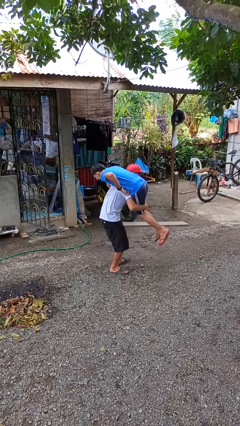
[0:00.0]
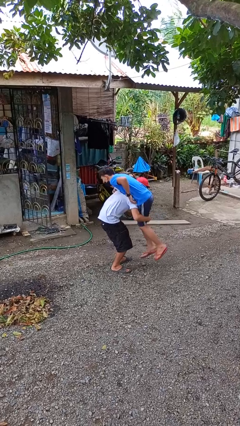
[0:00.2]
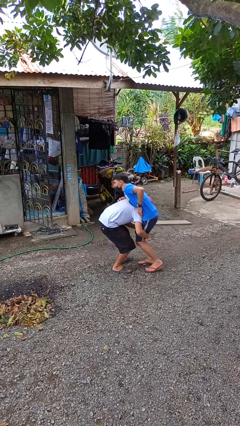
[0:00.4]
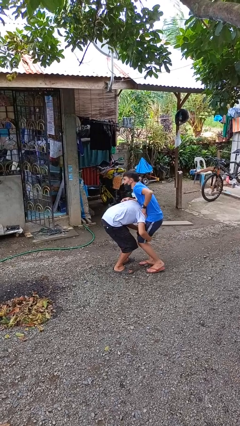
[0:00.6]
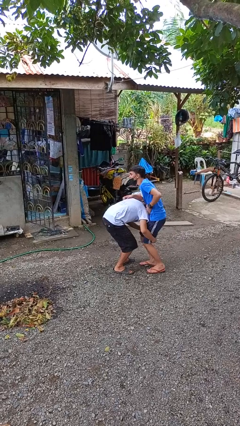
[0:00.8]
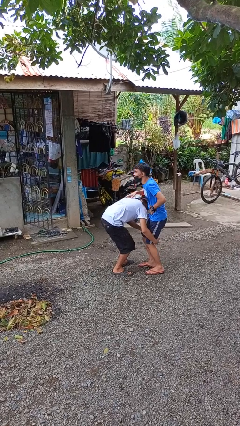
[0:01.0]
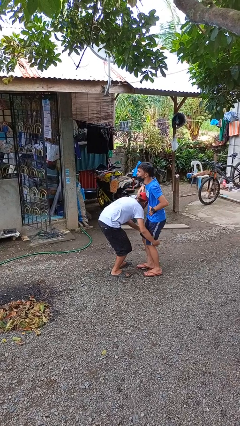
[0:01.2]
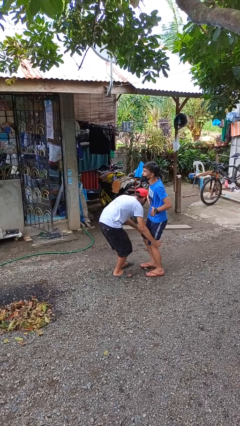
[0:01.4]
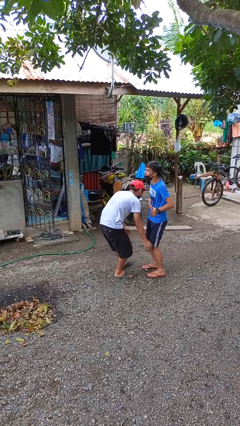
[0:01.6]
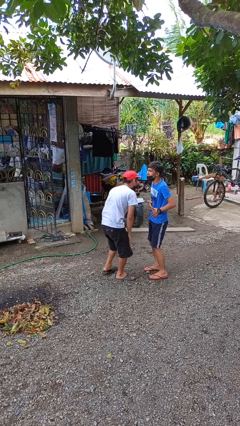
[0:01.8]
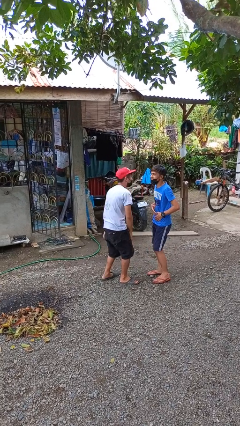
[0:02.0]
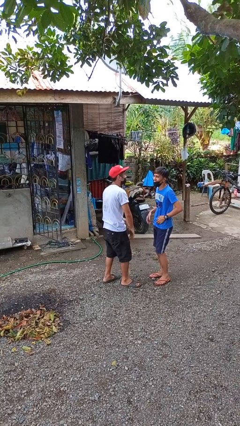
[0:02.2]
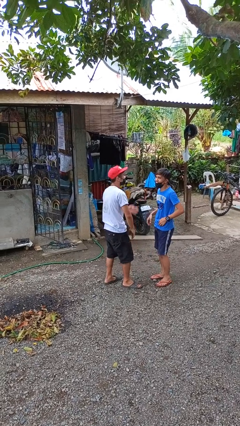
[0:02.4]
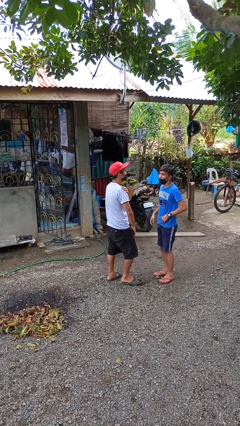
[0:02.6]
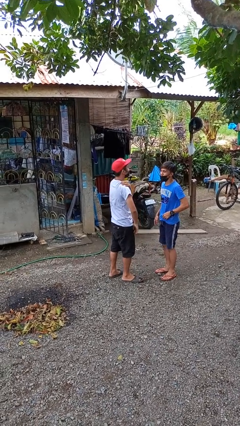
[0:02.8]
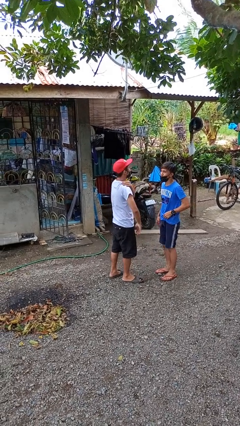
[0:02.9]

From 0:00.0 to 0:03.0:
person puts down person

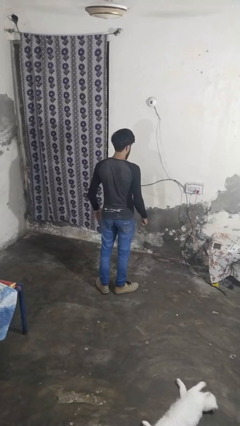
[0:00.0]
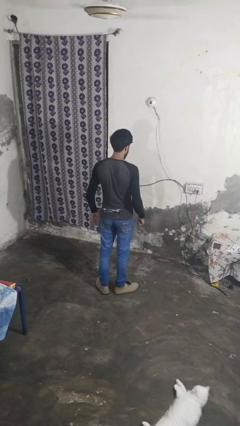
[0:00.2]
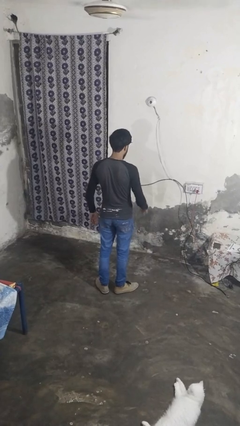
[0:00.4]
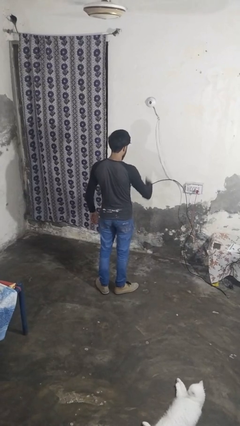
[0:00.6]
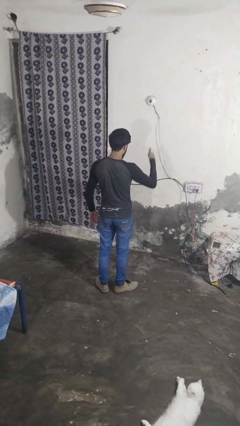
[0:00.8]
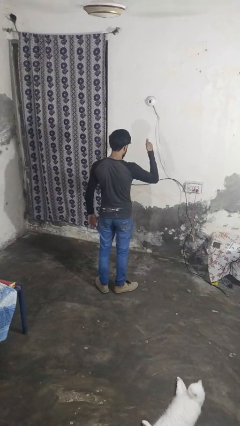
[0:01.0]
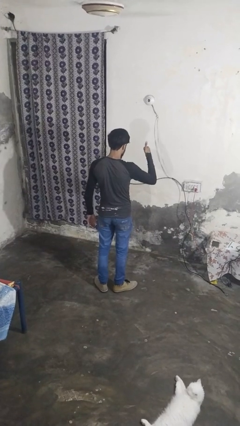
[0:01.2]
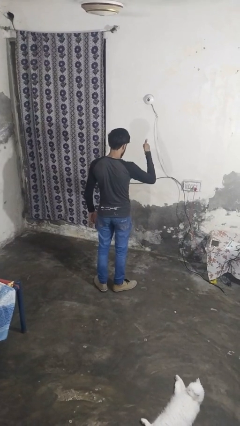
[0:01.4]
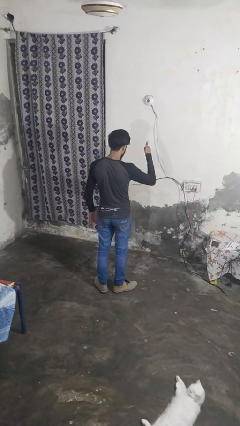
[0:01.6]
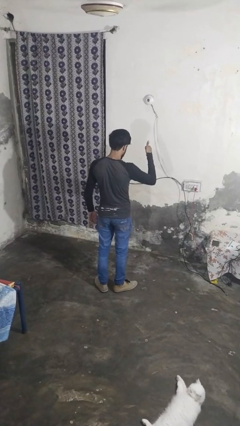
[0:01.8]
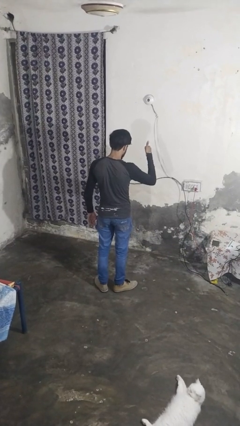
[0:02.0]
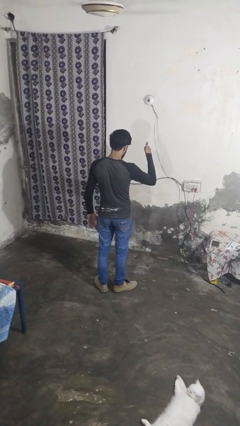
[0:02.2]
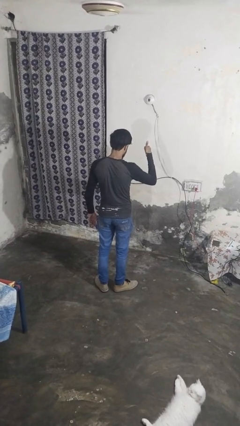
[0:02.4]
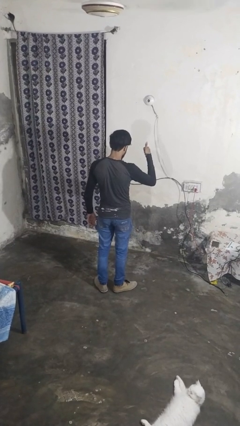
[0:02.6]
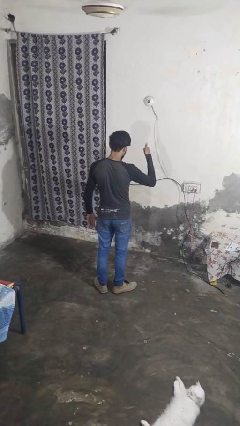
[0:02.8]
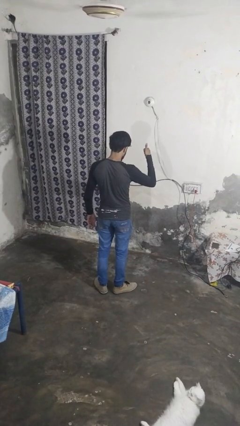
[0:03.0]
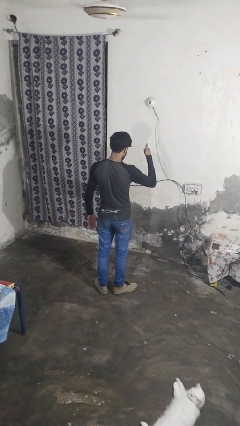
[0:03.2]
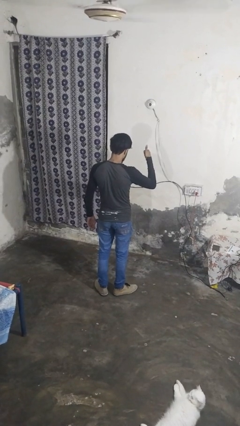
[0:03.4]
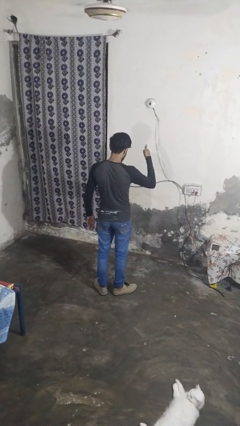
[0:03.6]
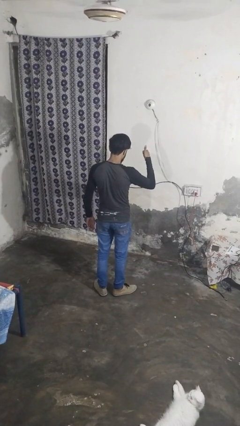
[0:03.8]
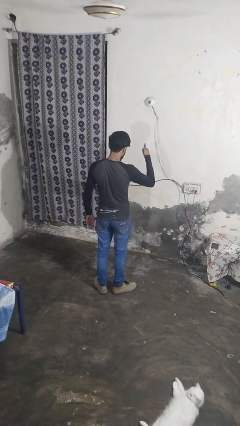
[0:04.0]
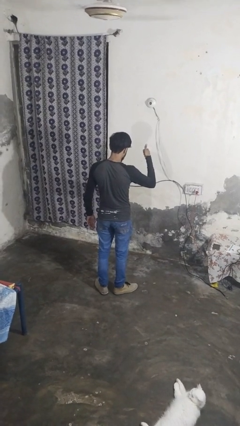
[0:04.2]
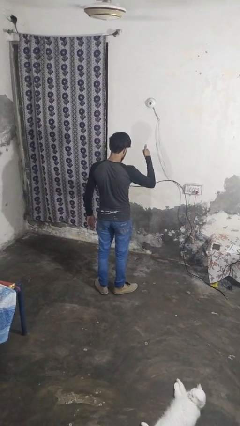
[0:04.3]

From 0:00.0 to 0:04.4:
person gestures thumbs up

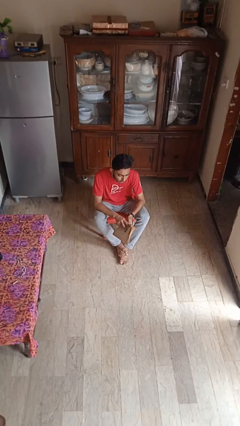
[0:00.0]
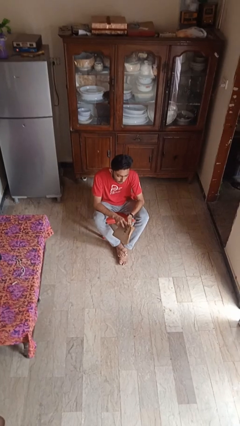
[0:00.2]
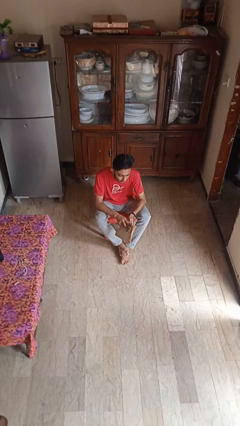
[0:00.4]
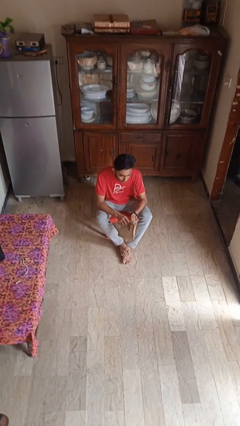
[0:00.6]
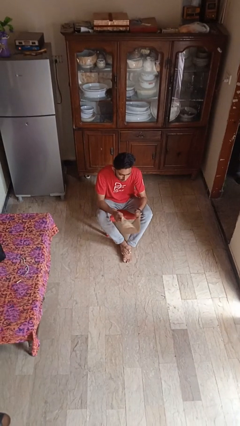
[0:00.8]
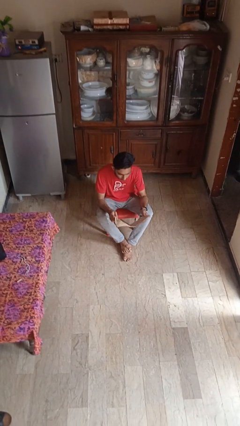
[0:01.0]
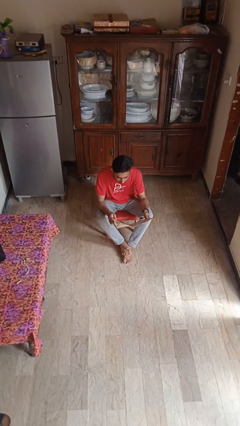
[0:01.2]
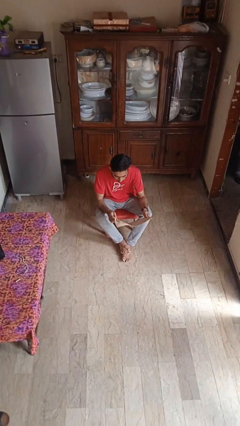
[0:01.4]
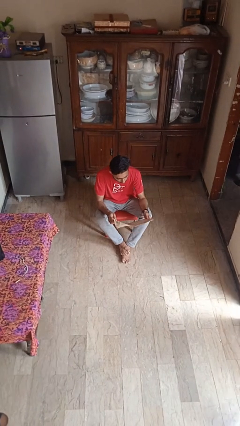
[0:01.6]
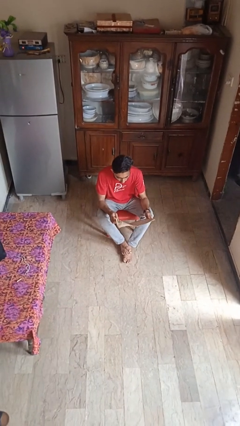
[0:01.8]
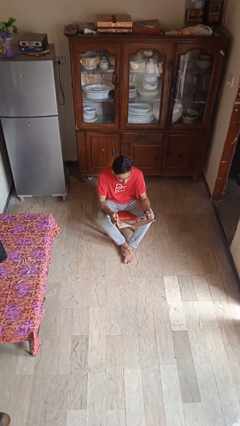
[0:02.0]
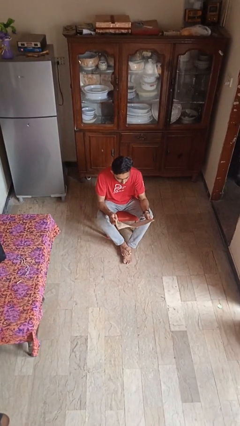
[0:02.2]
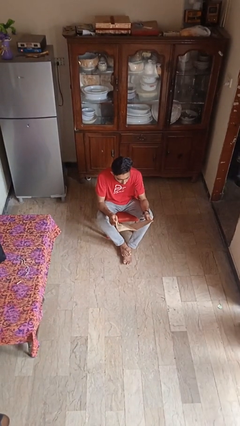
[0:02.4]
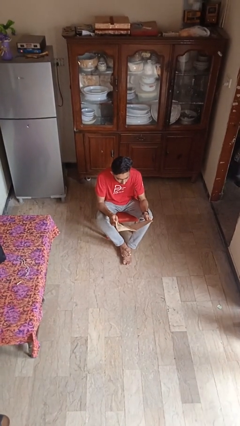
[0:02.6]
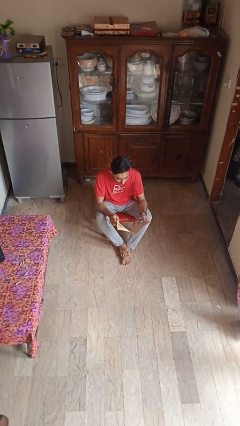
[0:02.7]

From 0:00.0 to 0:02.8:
person reads newspaper

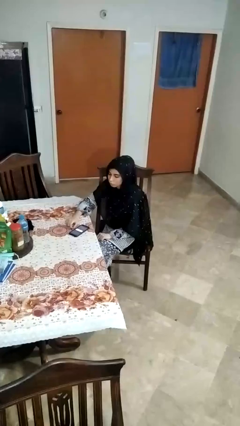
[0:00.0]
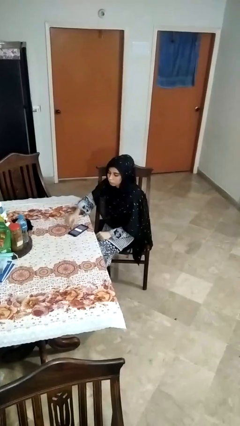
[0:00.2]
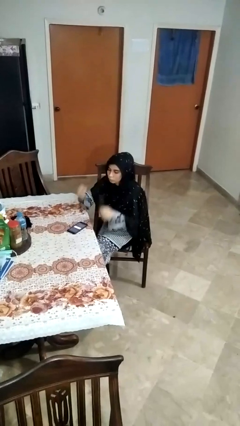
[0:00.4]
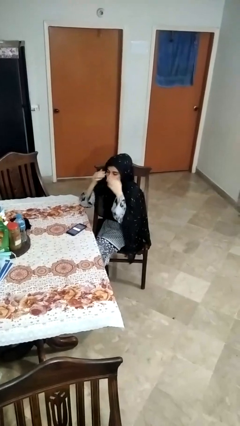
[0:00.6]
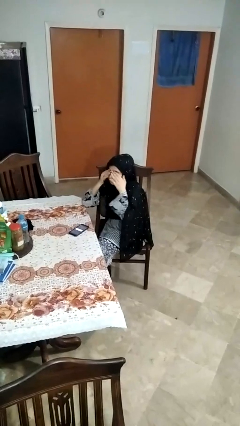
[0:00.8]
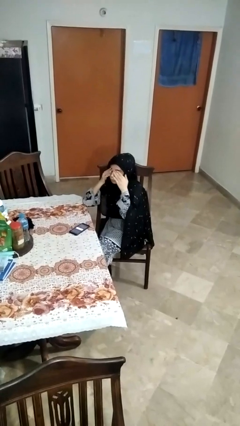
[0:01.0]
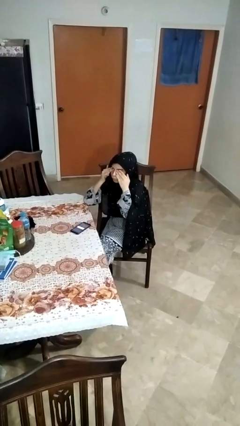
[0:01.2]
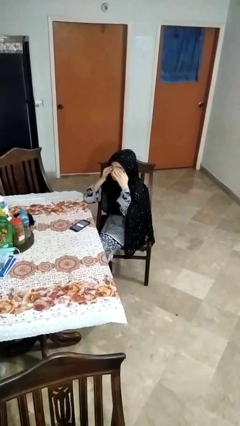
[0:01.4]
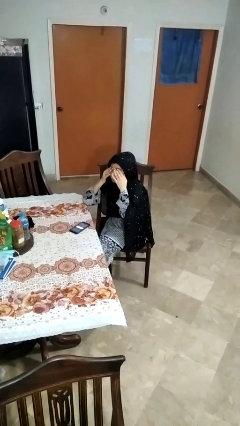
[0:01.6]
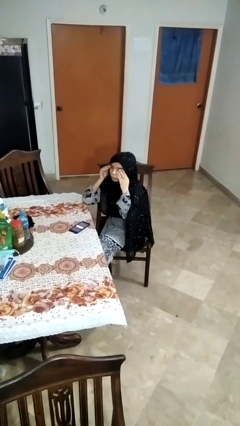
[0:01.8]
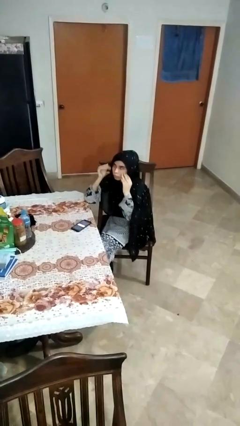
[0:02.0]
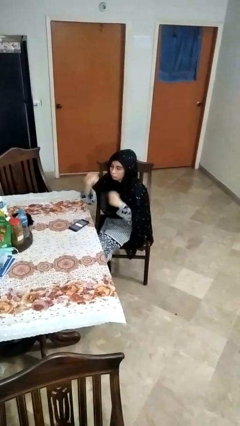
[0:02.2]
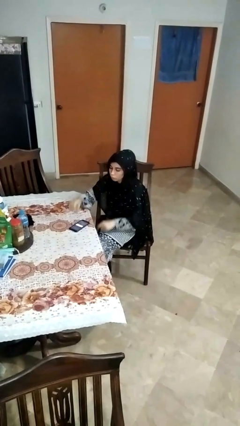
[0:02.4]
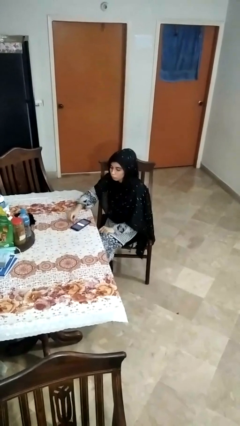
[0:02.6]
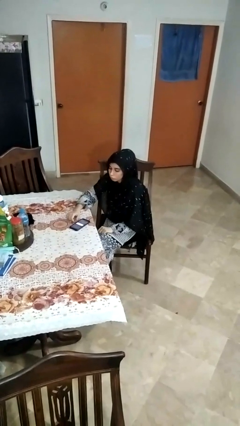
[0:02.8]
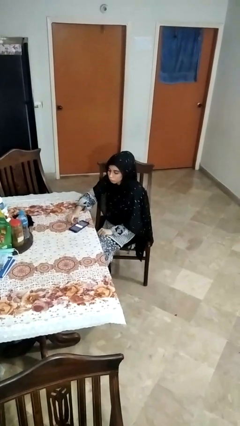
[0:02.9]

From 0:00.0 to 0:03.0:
person rubs eyes

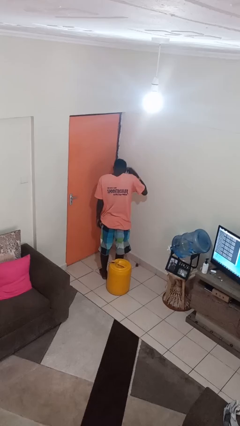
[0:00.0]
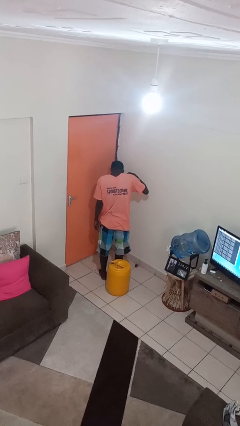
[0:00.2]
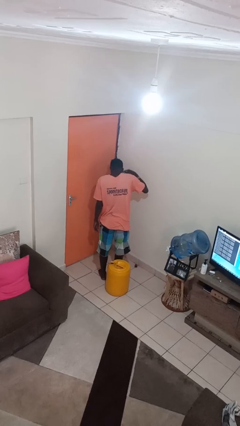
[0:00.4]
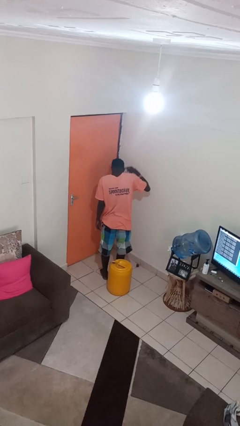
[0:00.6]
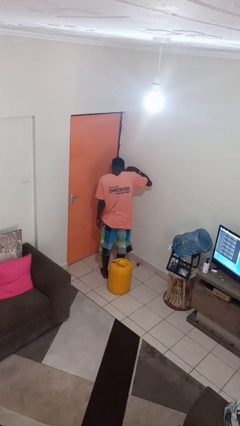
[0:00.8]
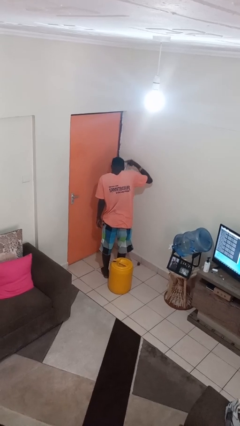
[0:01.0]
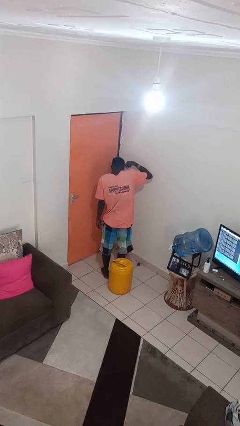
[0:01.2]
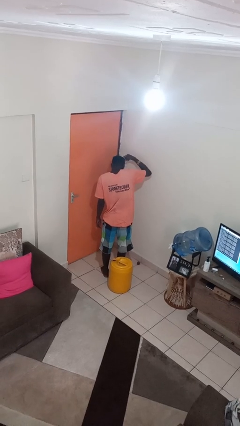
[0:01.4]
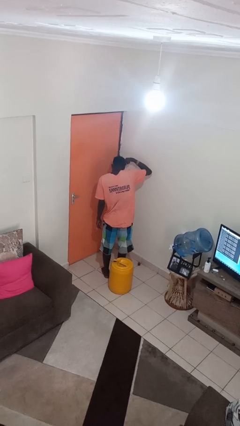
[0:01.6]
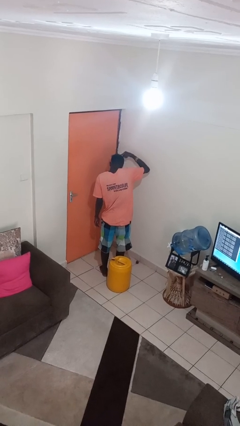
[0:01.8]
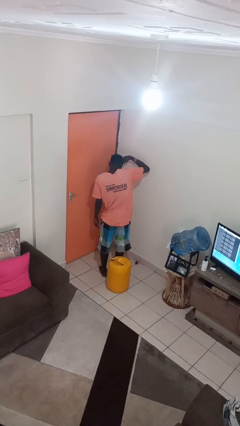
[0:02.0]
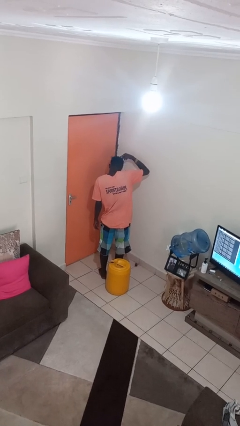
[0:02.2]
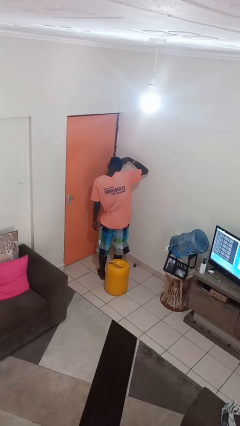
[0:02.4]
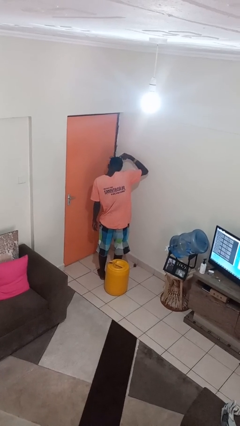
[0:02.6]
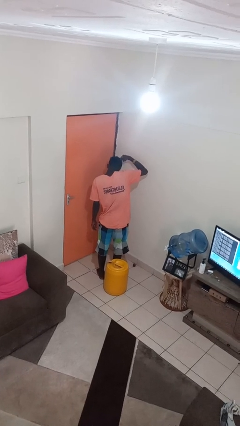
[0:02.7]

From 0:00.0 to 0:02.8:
person brushes hair

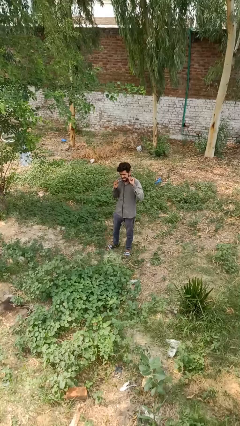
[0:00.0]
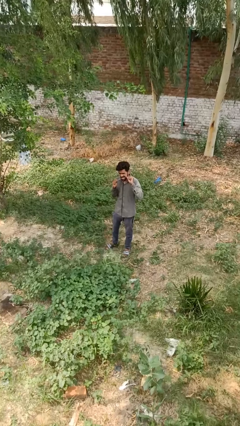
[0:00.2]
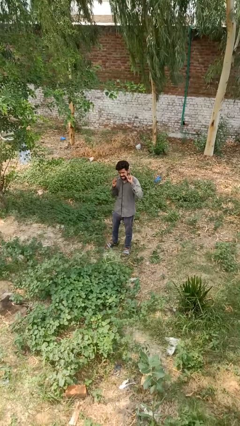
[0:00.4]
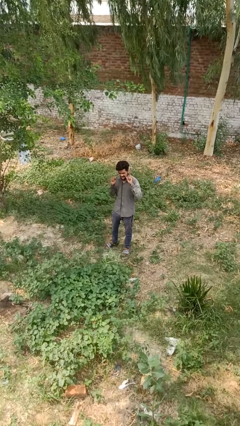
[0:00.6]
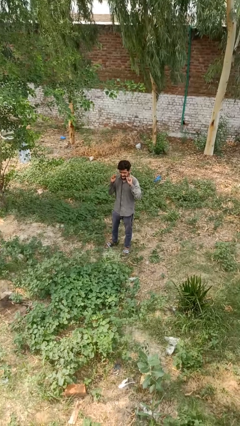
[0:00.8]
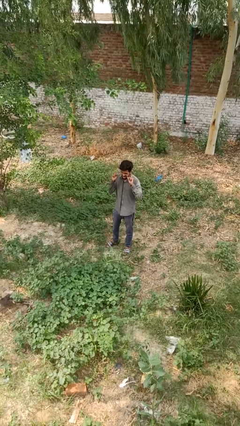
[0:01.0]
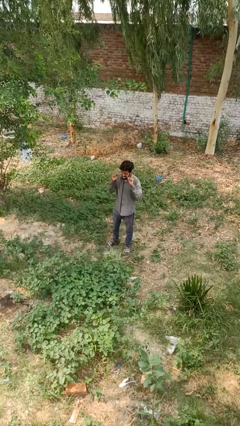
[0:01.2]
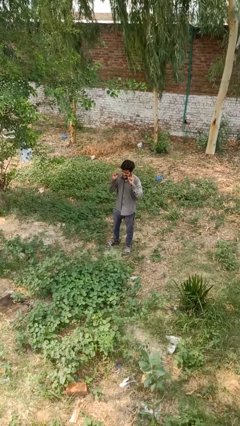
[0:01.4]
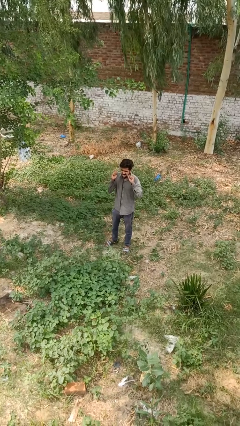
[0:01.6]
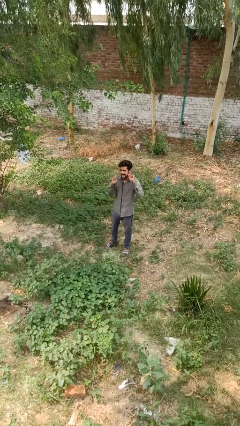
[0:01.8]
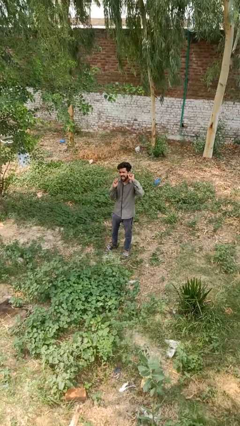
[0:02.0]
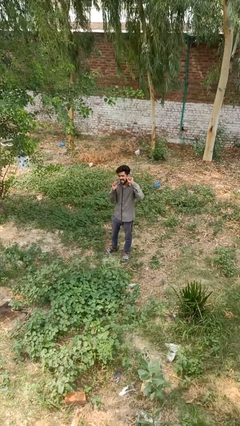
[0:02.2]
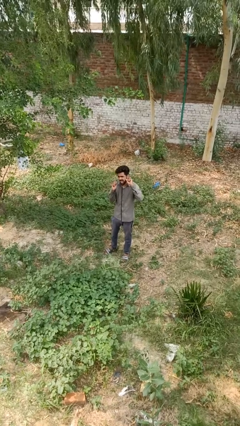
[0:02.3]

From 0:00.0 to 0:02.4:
person flosses
